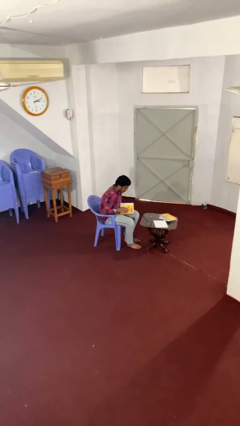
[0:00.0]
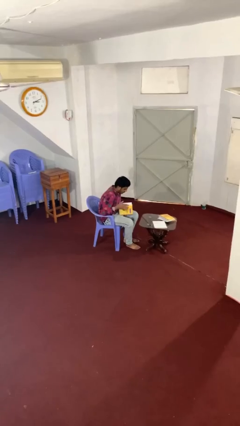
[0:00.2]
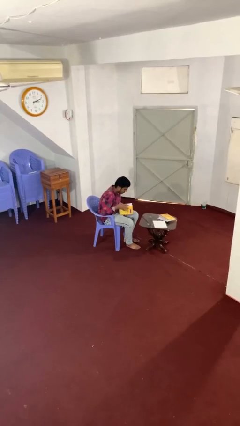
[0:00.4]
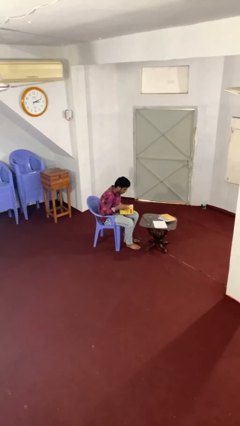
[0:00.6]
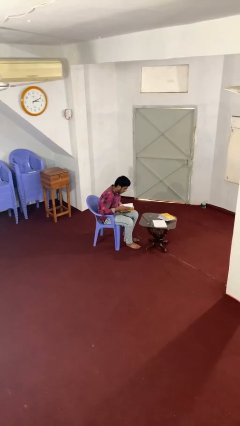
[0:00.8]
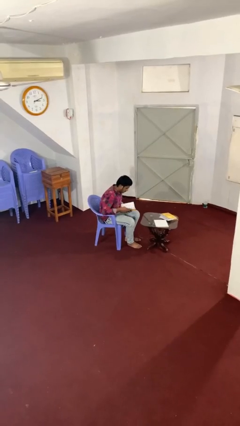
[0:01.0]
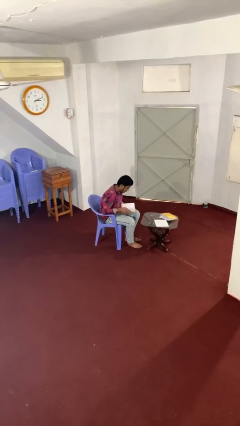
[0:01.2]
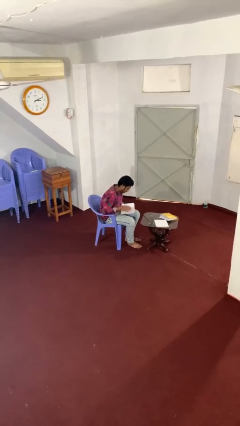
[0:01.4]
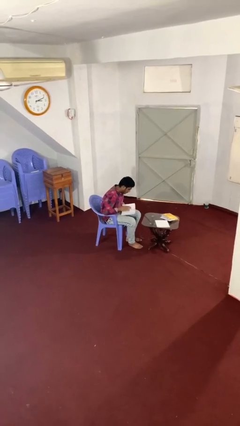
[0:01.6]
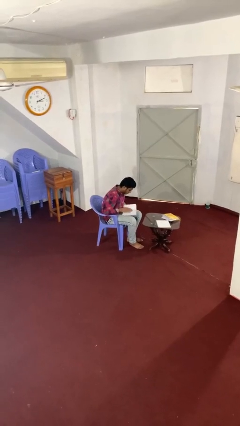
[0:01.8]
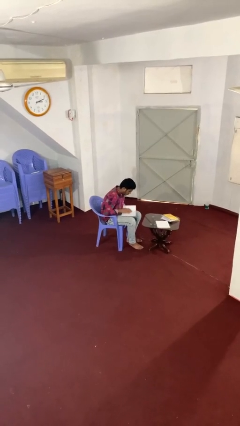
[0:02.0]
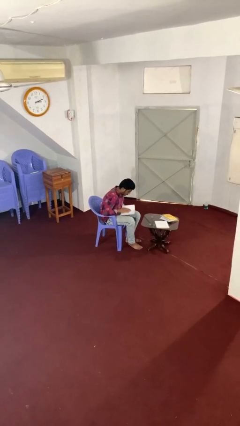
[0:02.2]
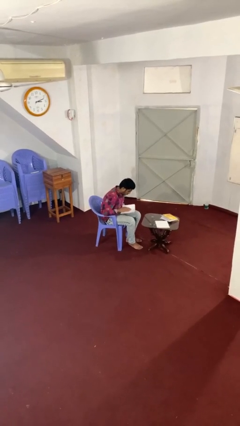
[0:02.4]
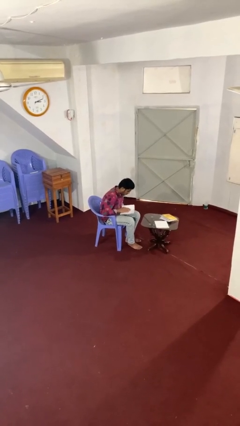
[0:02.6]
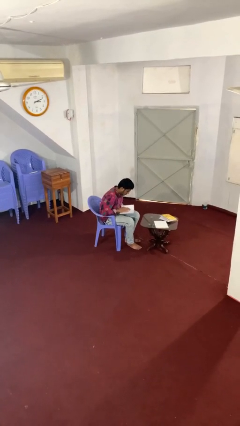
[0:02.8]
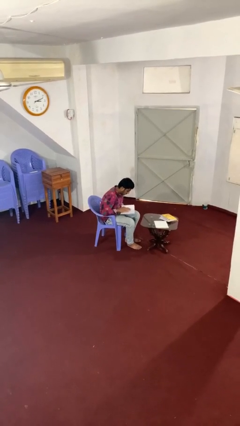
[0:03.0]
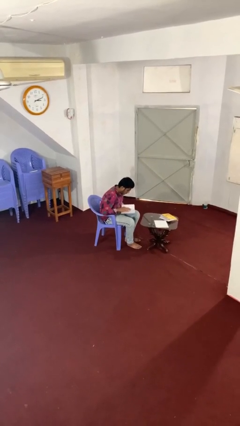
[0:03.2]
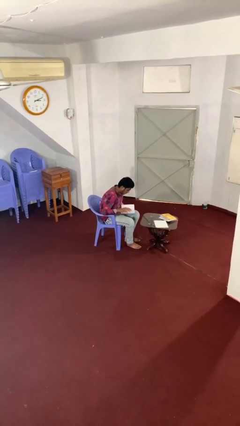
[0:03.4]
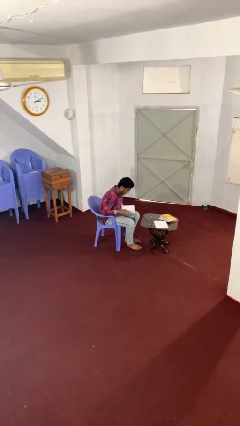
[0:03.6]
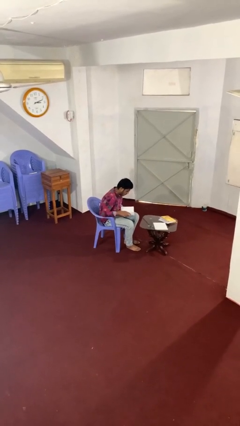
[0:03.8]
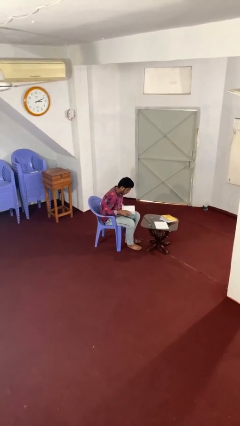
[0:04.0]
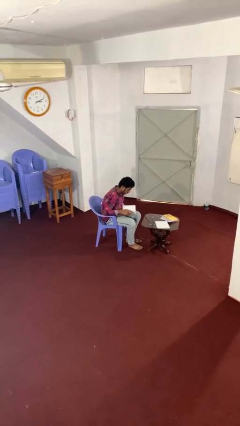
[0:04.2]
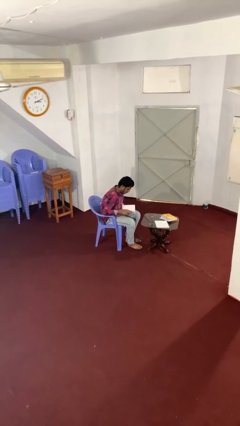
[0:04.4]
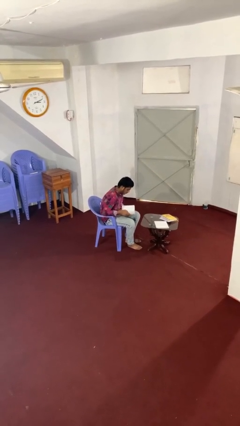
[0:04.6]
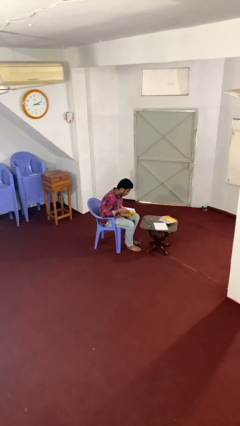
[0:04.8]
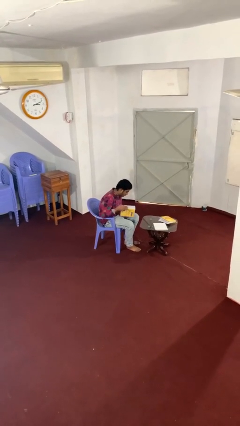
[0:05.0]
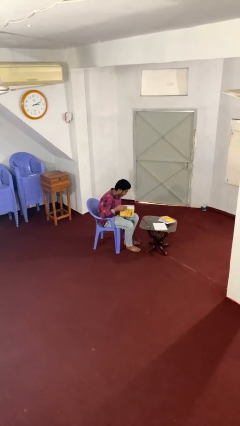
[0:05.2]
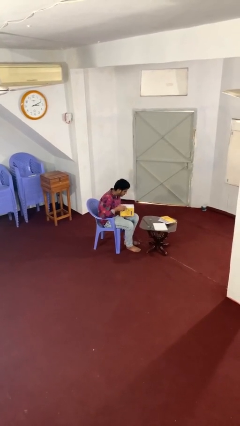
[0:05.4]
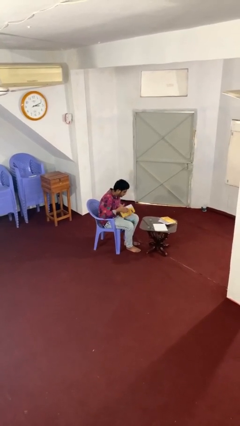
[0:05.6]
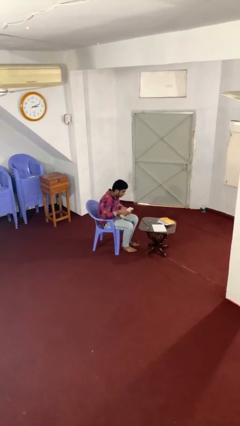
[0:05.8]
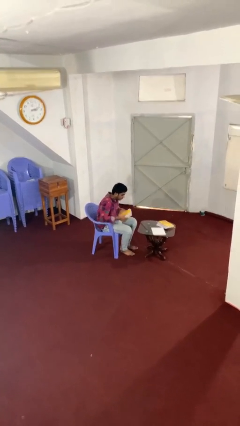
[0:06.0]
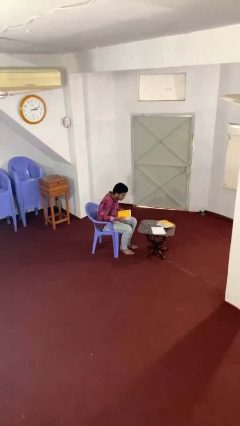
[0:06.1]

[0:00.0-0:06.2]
person reads document

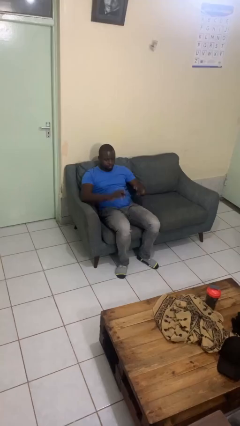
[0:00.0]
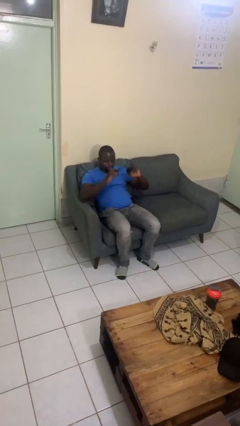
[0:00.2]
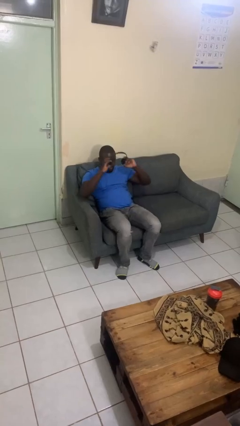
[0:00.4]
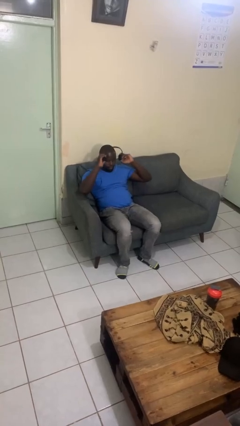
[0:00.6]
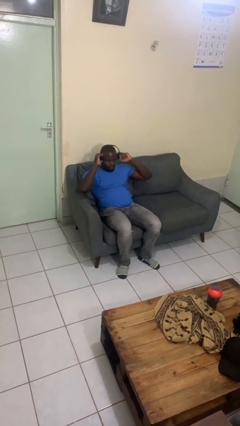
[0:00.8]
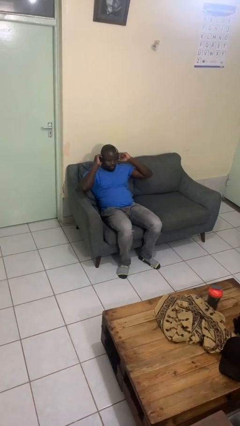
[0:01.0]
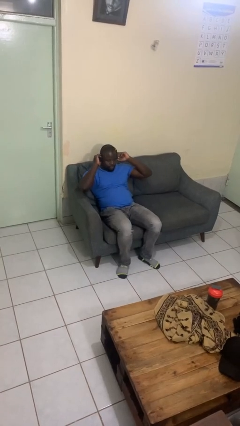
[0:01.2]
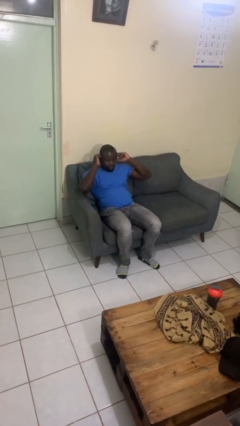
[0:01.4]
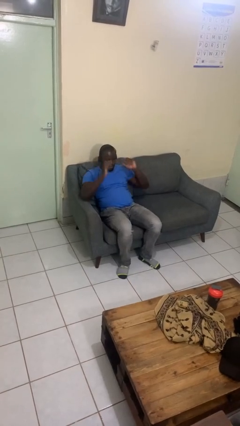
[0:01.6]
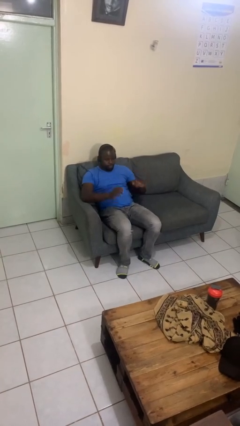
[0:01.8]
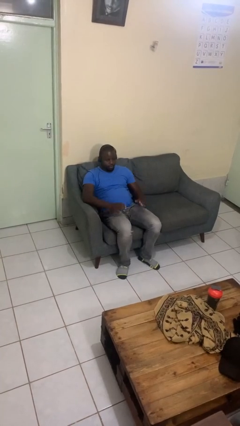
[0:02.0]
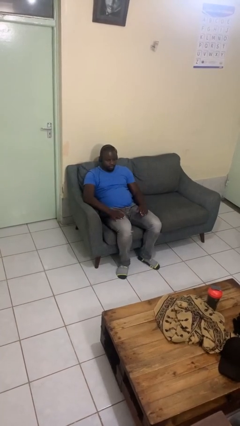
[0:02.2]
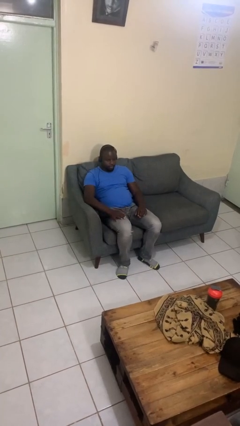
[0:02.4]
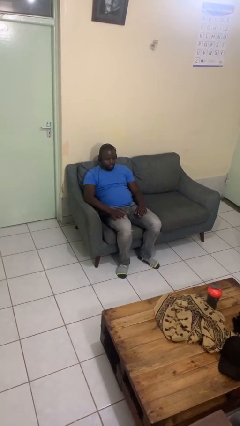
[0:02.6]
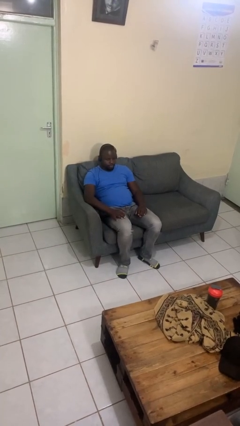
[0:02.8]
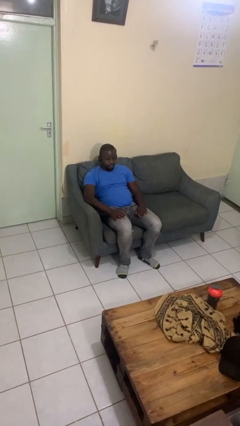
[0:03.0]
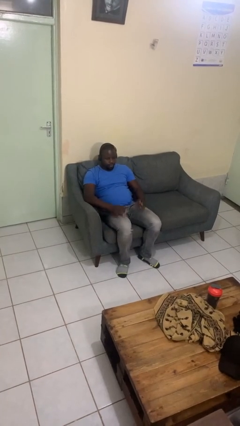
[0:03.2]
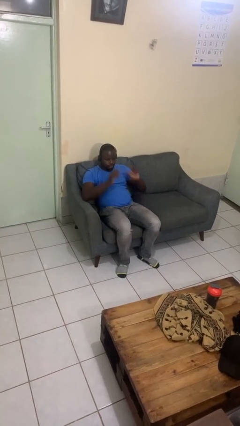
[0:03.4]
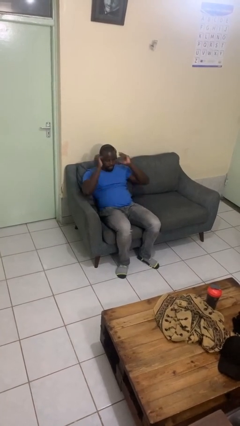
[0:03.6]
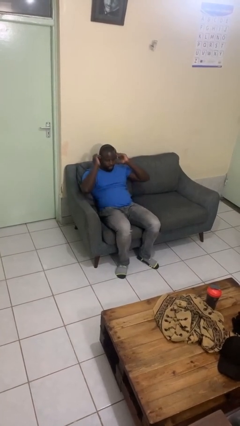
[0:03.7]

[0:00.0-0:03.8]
person puts on headphones

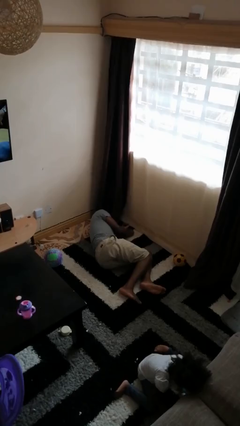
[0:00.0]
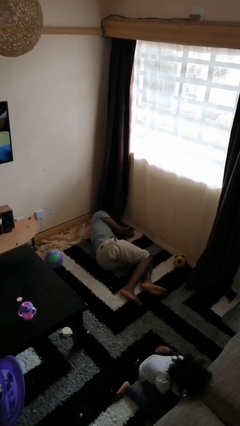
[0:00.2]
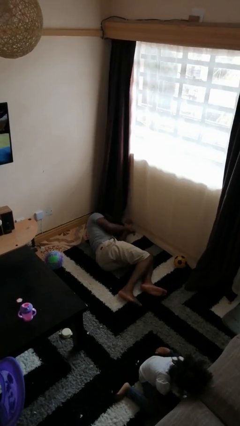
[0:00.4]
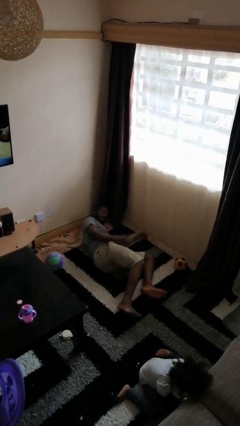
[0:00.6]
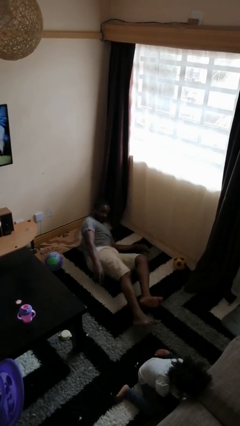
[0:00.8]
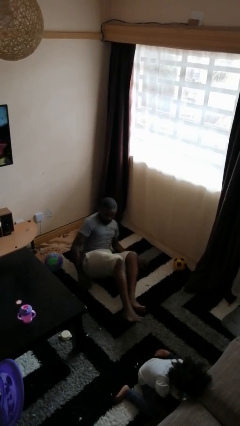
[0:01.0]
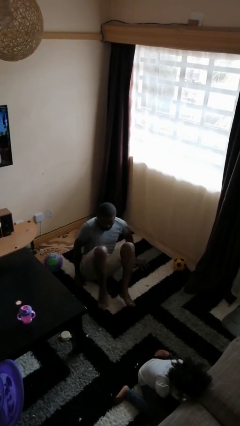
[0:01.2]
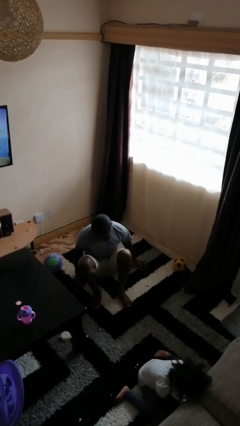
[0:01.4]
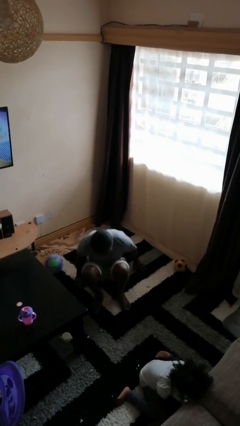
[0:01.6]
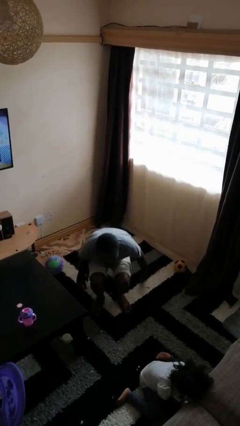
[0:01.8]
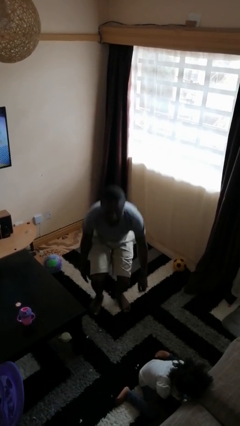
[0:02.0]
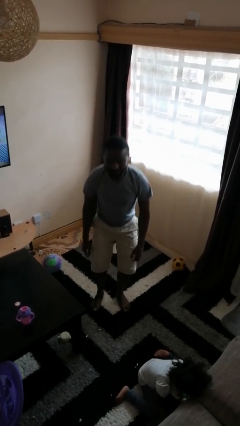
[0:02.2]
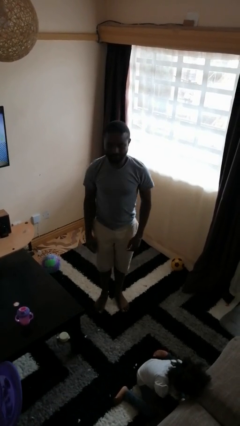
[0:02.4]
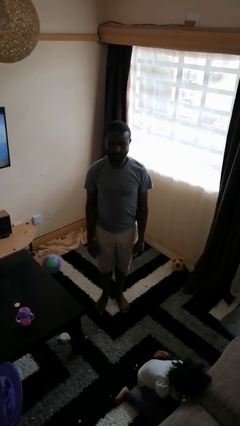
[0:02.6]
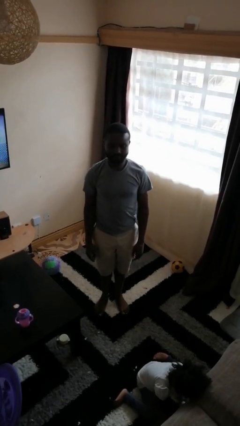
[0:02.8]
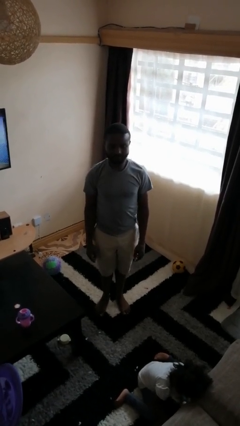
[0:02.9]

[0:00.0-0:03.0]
person stands up from floor

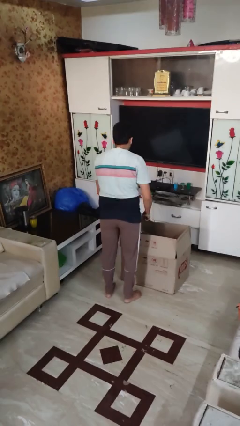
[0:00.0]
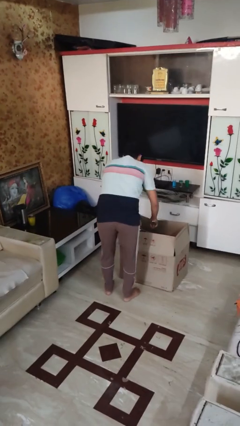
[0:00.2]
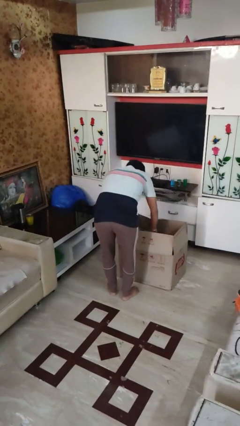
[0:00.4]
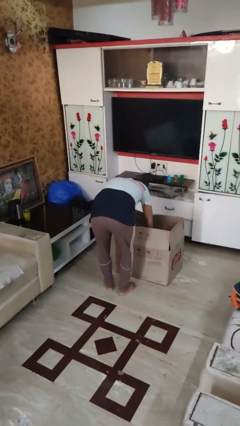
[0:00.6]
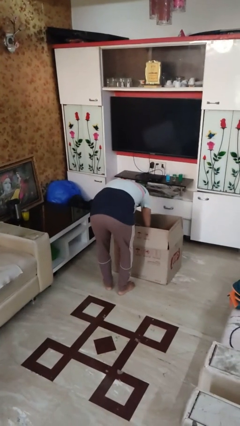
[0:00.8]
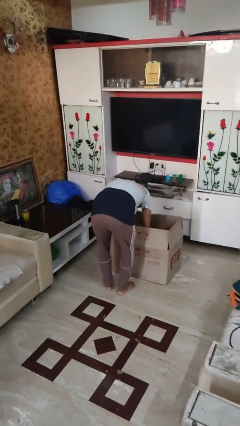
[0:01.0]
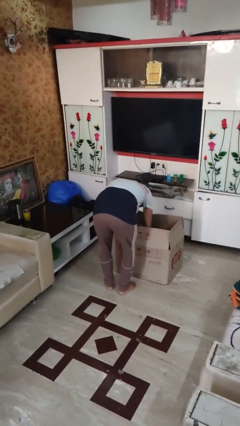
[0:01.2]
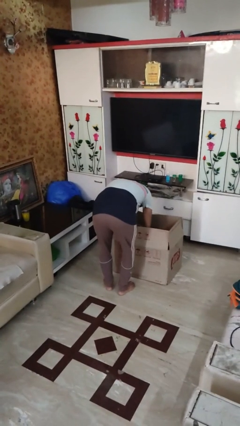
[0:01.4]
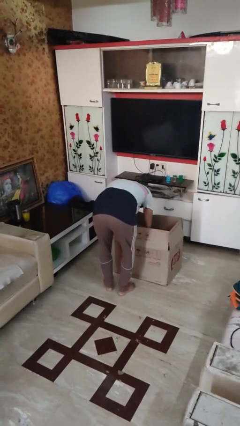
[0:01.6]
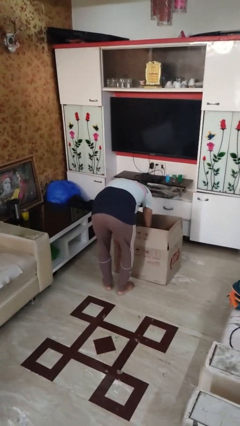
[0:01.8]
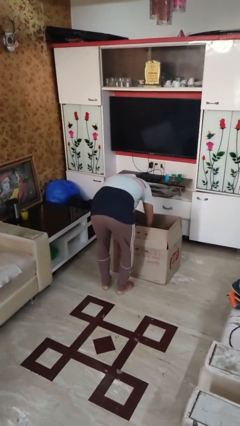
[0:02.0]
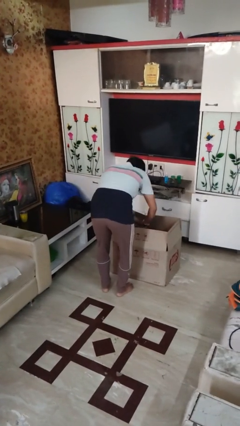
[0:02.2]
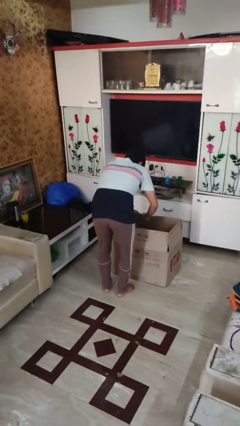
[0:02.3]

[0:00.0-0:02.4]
person searches in box

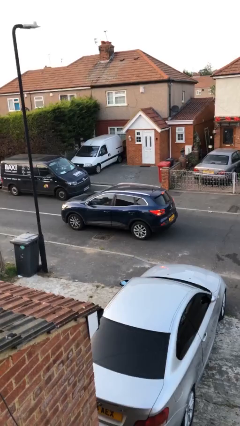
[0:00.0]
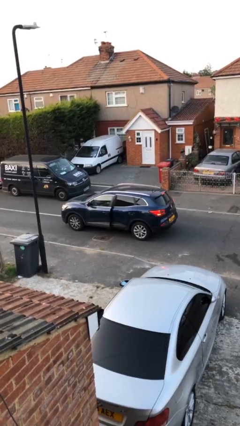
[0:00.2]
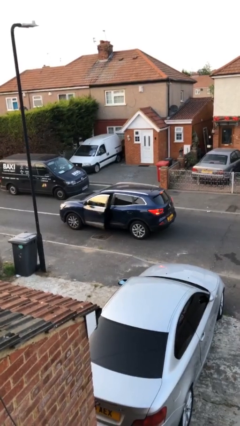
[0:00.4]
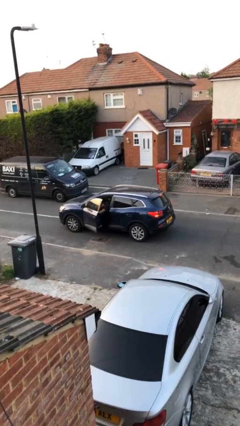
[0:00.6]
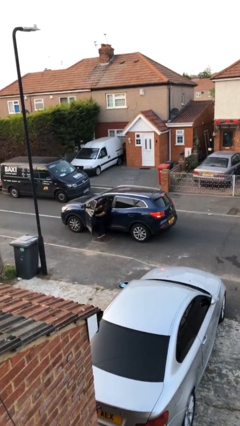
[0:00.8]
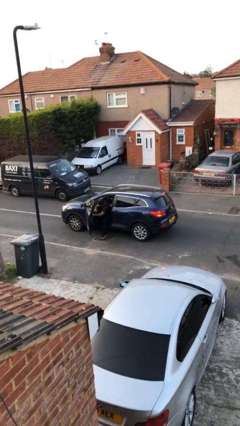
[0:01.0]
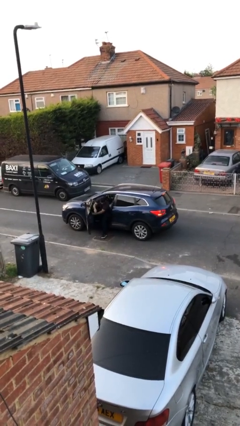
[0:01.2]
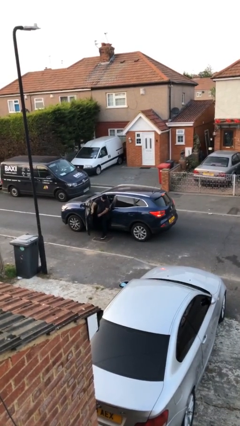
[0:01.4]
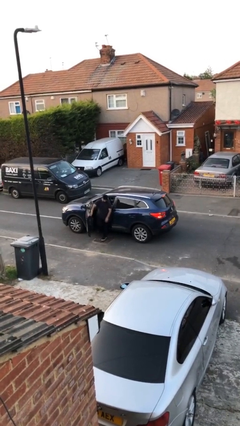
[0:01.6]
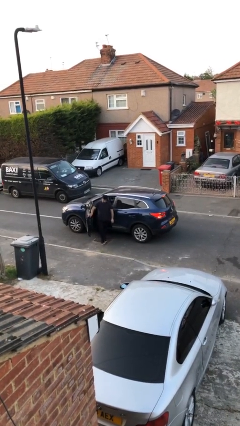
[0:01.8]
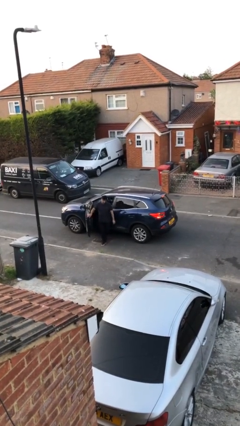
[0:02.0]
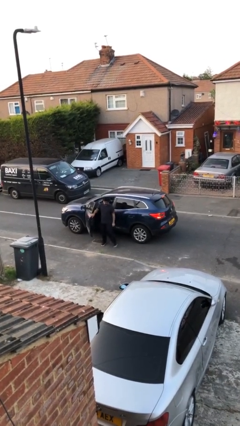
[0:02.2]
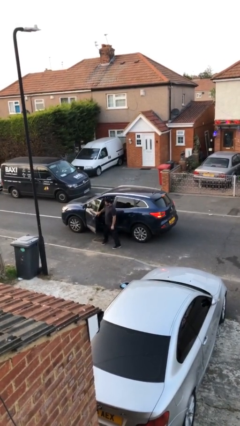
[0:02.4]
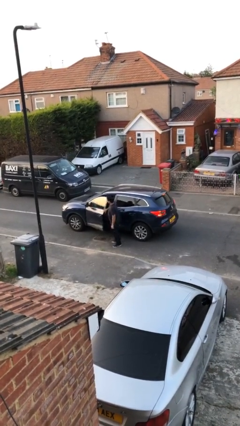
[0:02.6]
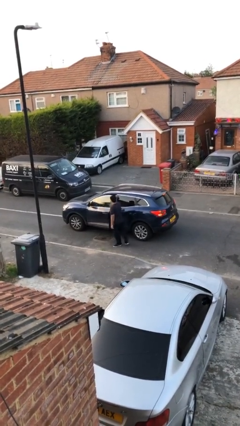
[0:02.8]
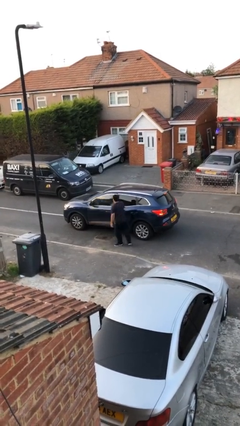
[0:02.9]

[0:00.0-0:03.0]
car drops off person
